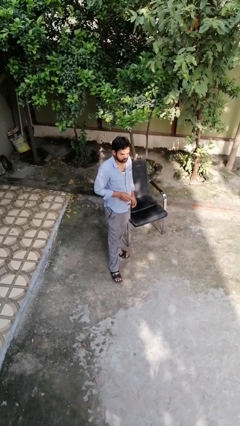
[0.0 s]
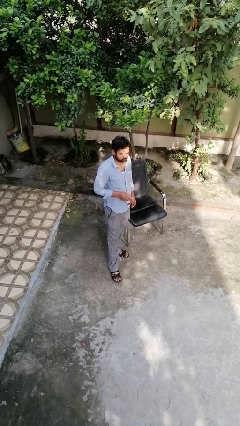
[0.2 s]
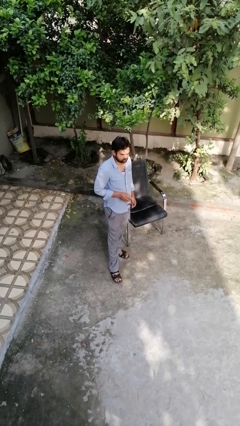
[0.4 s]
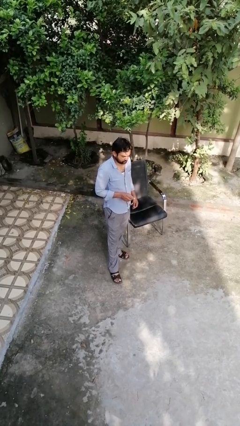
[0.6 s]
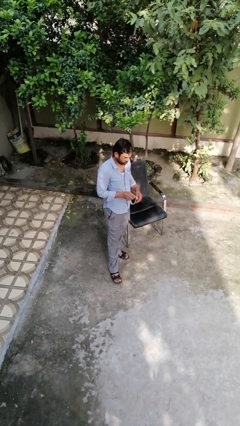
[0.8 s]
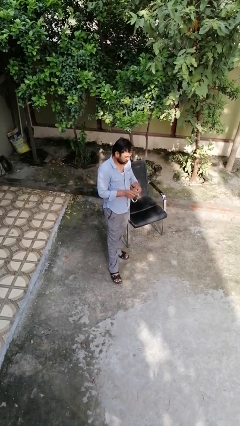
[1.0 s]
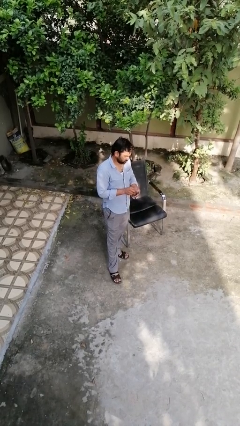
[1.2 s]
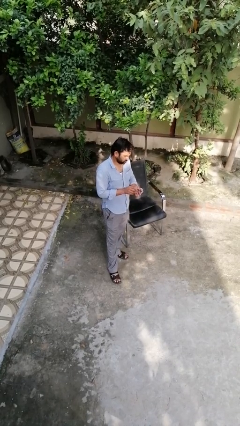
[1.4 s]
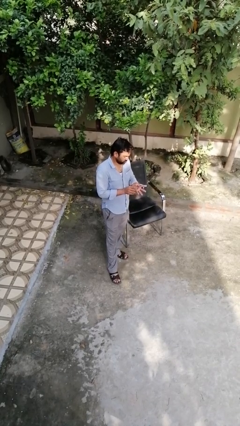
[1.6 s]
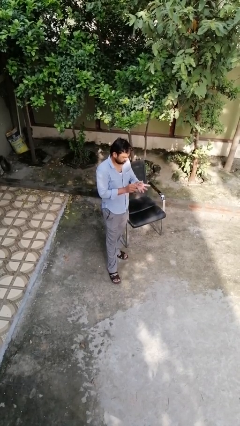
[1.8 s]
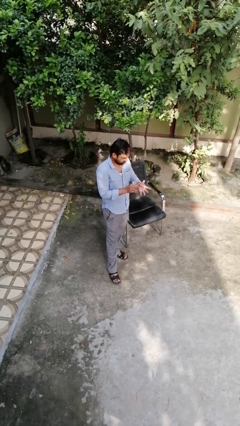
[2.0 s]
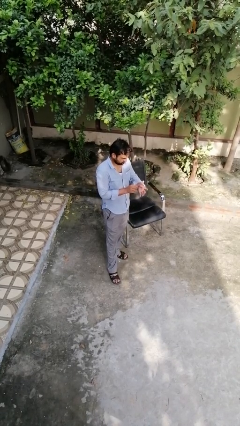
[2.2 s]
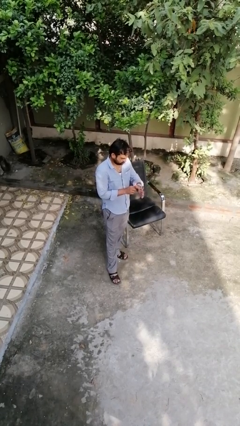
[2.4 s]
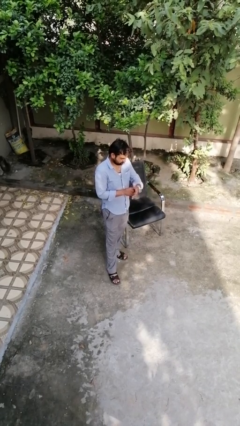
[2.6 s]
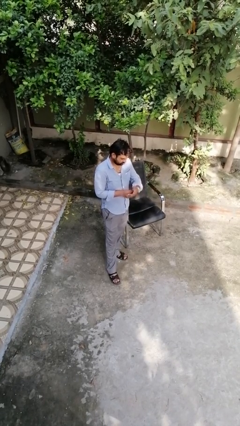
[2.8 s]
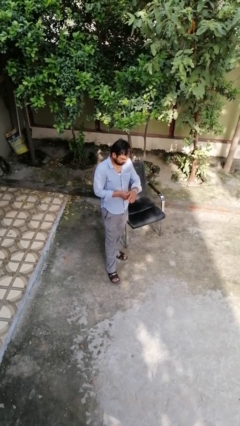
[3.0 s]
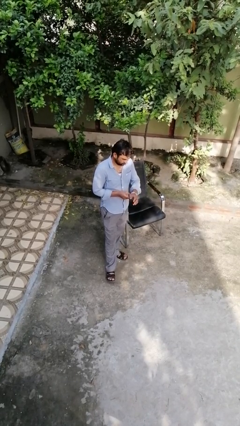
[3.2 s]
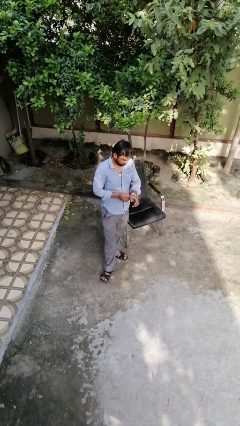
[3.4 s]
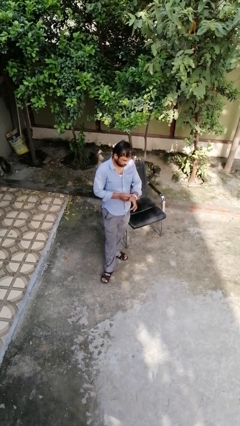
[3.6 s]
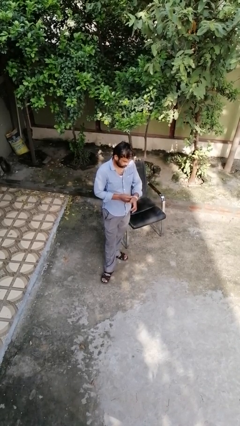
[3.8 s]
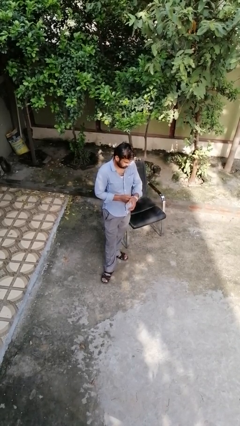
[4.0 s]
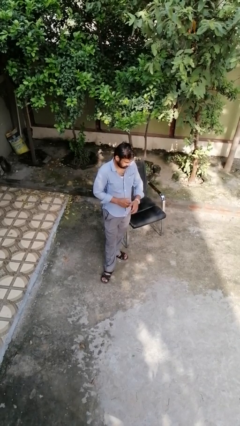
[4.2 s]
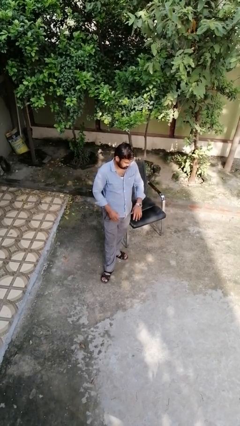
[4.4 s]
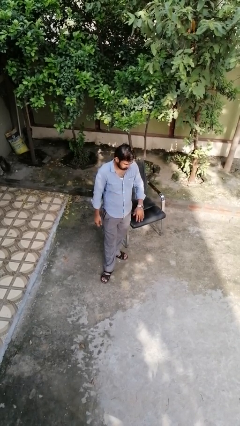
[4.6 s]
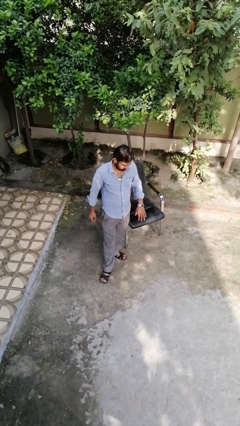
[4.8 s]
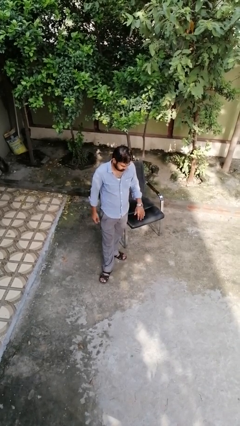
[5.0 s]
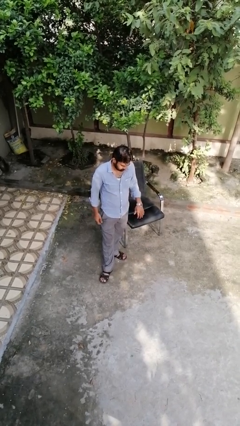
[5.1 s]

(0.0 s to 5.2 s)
person puts on wristwatch

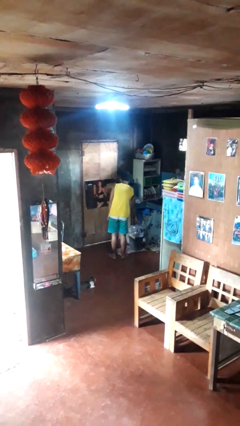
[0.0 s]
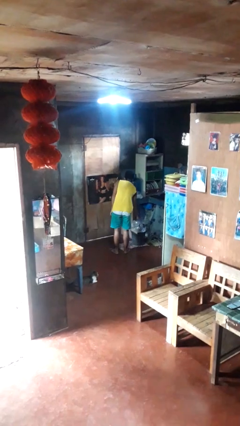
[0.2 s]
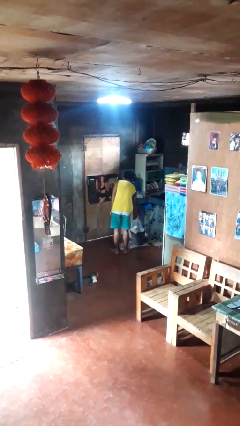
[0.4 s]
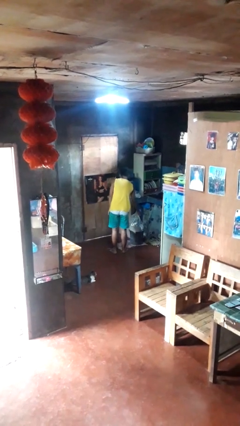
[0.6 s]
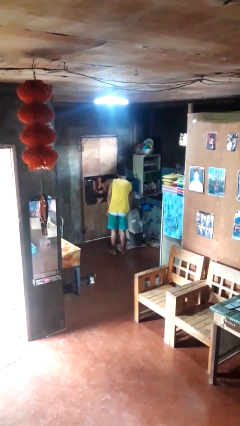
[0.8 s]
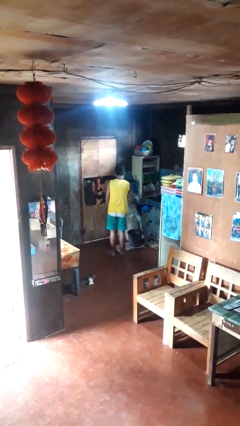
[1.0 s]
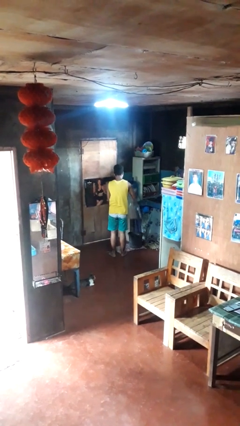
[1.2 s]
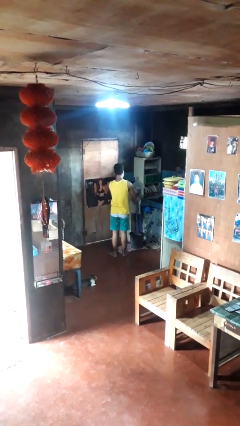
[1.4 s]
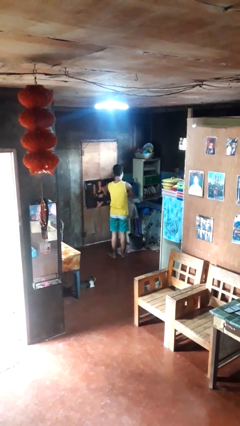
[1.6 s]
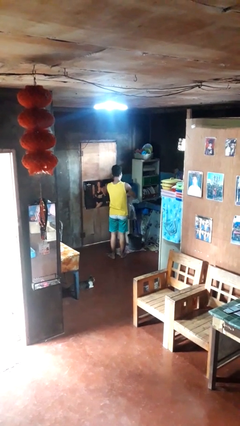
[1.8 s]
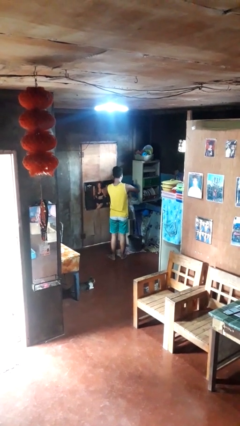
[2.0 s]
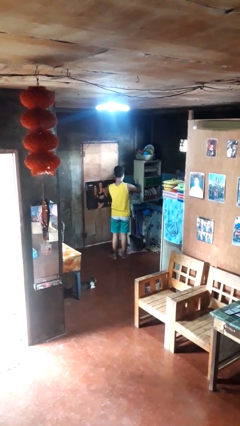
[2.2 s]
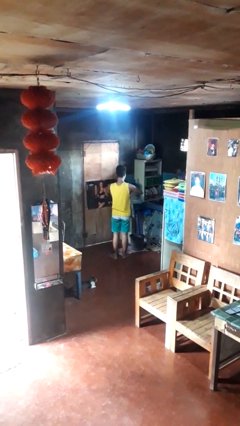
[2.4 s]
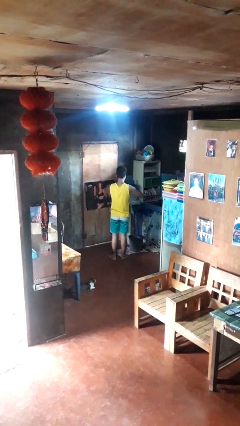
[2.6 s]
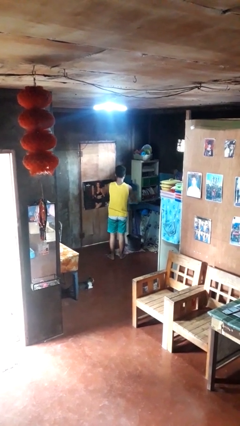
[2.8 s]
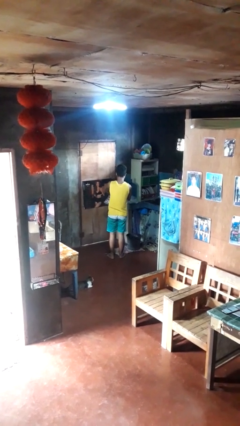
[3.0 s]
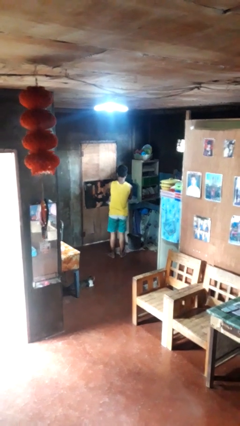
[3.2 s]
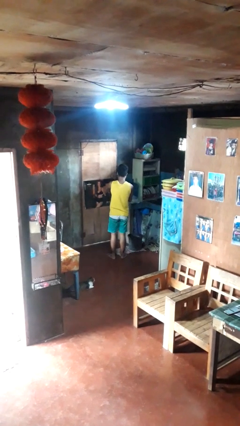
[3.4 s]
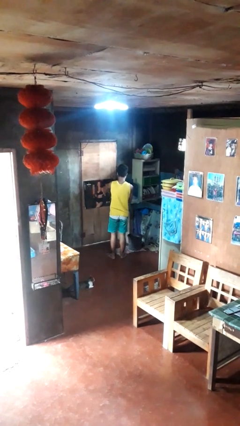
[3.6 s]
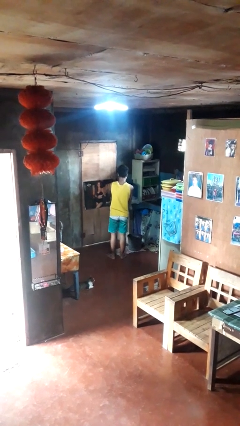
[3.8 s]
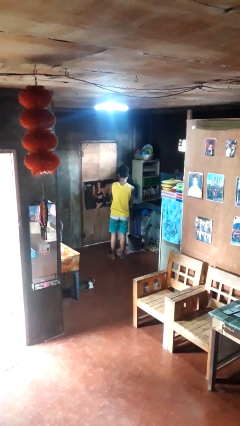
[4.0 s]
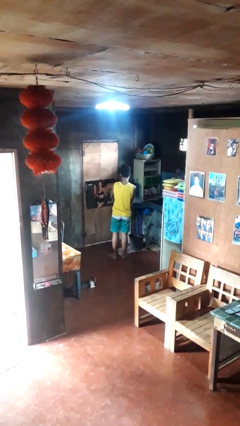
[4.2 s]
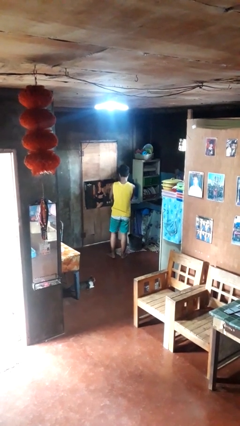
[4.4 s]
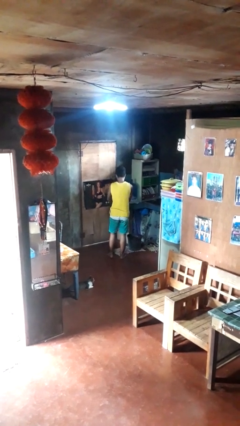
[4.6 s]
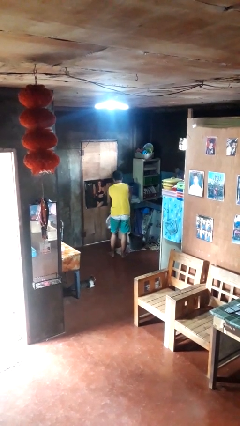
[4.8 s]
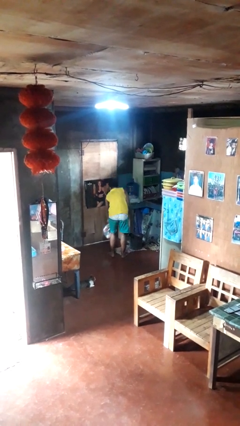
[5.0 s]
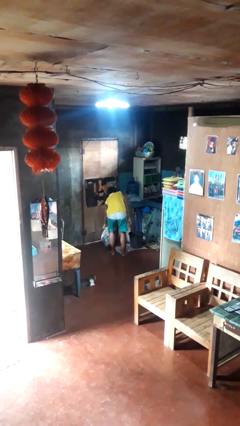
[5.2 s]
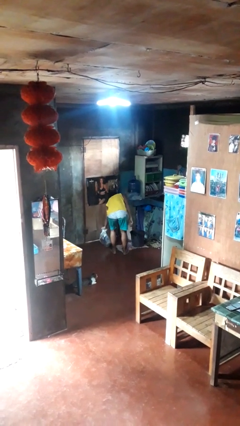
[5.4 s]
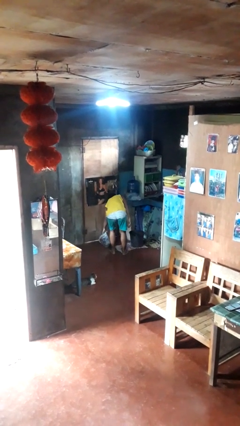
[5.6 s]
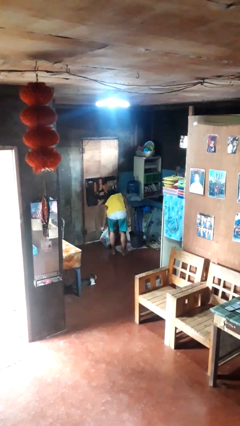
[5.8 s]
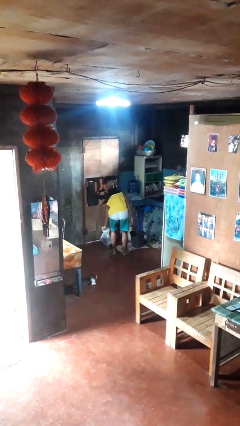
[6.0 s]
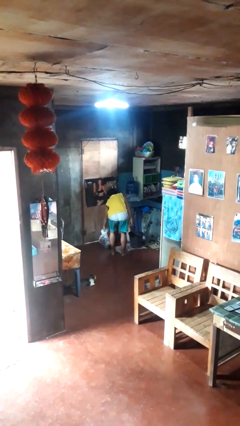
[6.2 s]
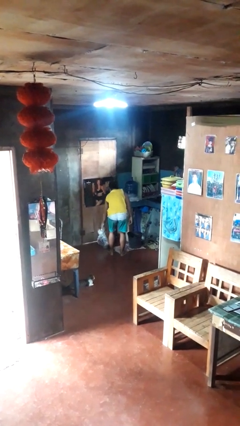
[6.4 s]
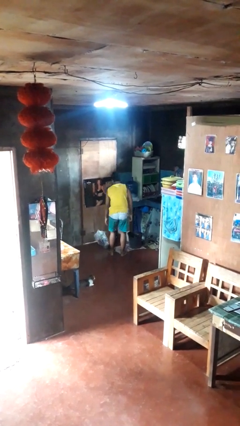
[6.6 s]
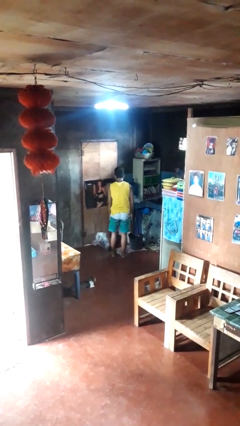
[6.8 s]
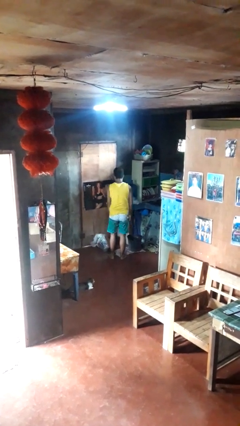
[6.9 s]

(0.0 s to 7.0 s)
person removes trashbag from trashcan

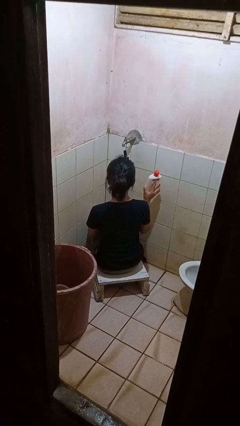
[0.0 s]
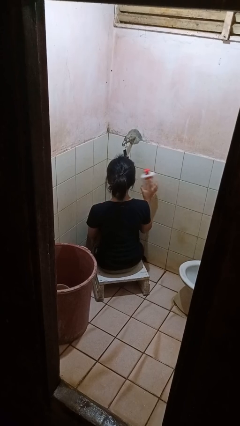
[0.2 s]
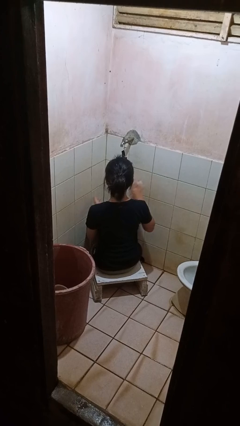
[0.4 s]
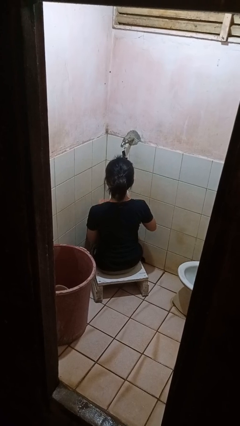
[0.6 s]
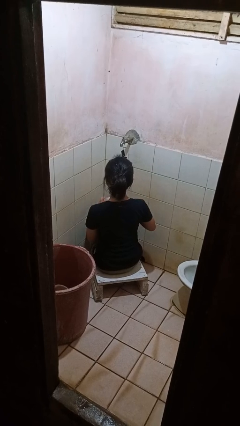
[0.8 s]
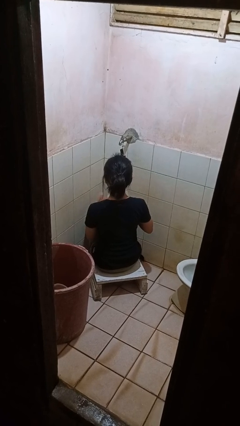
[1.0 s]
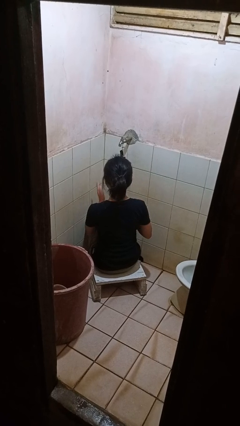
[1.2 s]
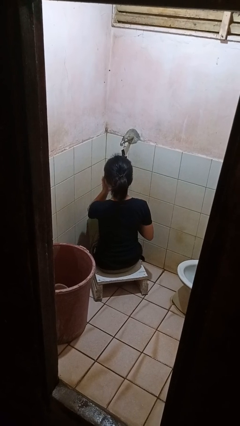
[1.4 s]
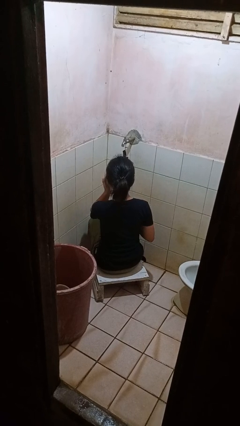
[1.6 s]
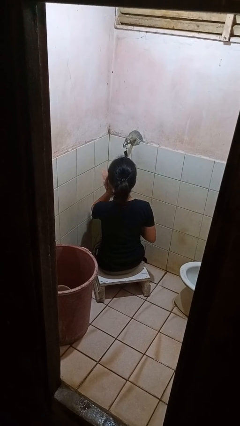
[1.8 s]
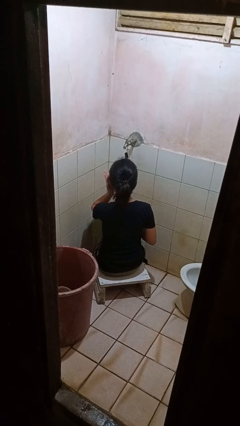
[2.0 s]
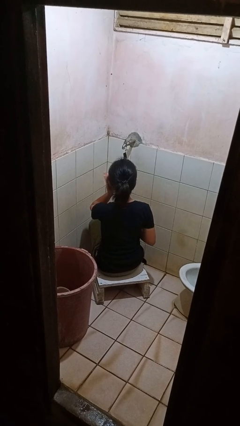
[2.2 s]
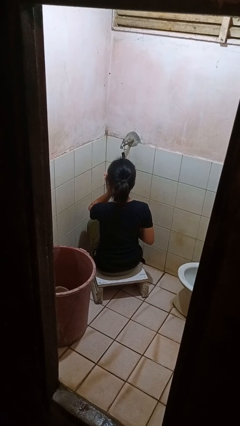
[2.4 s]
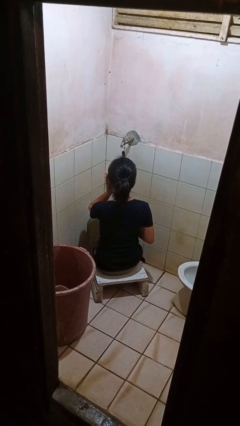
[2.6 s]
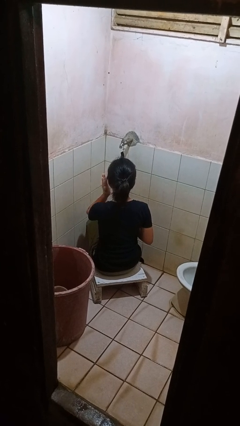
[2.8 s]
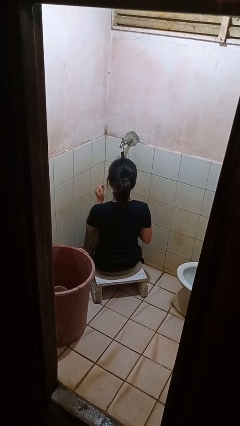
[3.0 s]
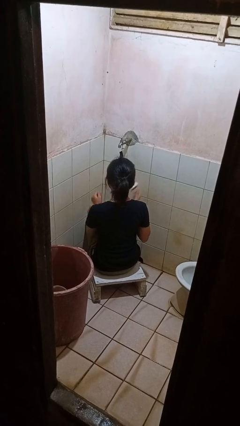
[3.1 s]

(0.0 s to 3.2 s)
person applies facial moisturizer

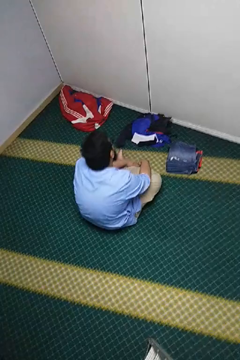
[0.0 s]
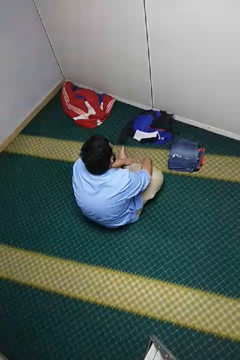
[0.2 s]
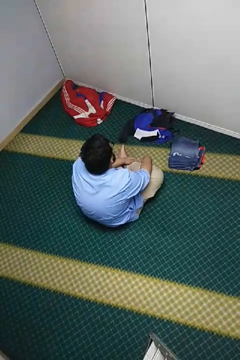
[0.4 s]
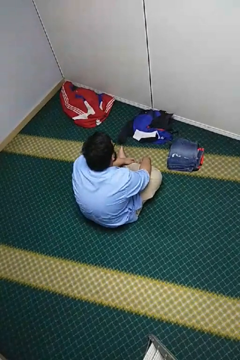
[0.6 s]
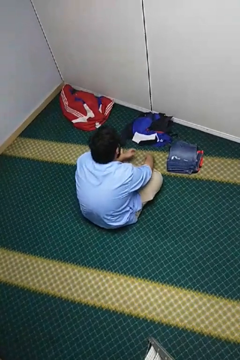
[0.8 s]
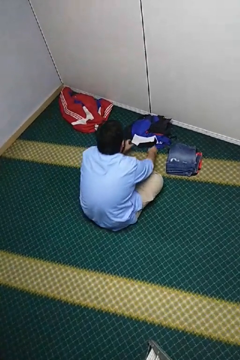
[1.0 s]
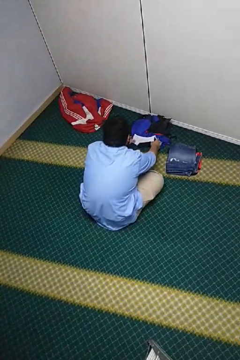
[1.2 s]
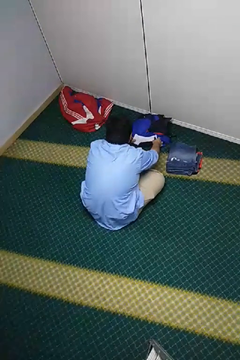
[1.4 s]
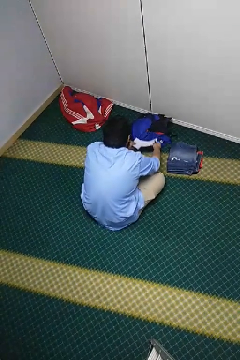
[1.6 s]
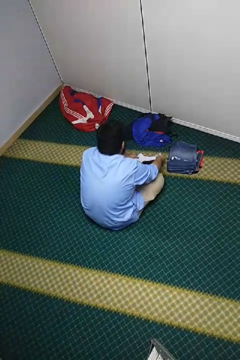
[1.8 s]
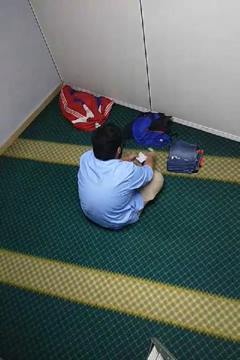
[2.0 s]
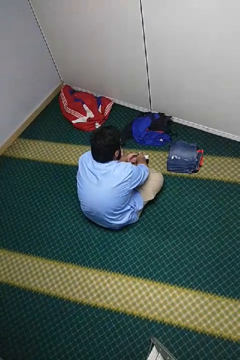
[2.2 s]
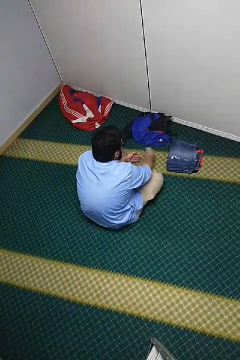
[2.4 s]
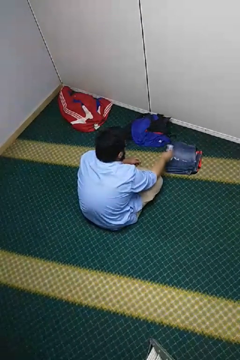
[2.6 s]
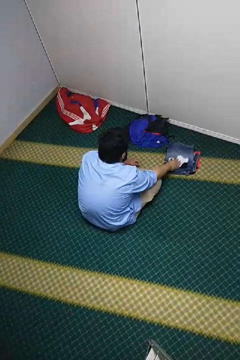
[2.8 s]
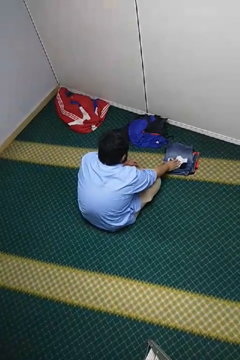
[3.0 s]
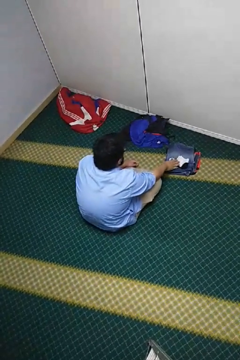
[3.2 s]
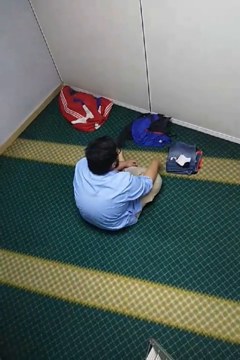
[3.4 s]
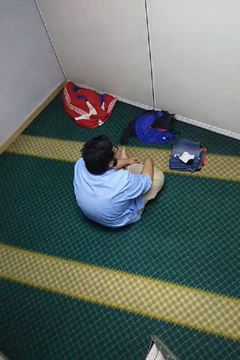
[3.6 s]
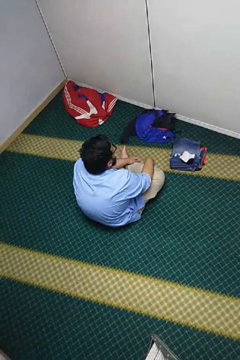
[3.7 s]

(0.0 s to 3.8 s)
person folds socks
